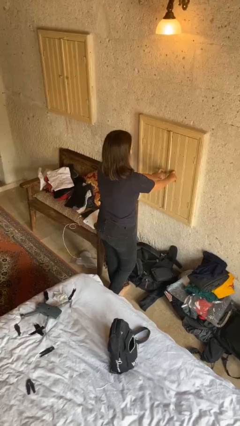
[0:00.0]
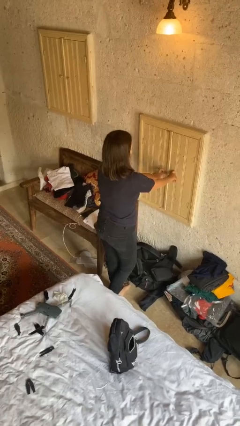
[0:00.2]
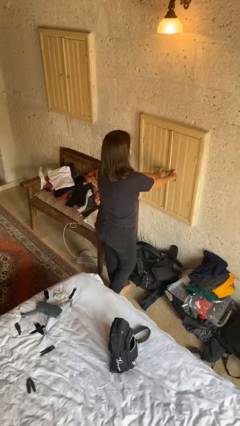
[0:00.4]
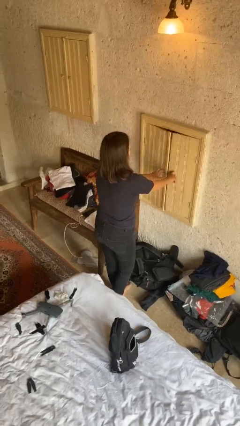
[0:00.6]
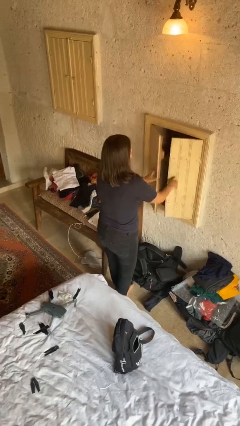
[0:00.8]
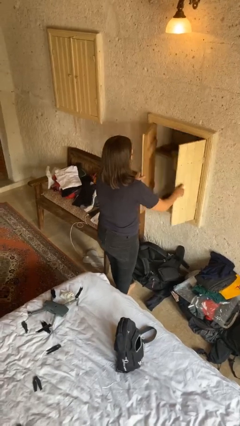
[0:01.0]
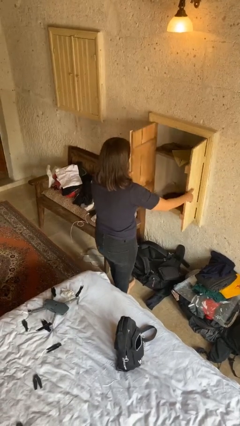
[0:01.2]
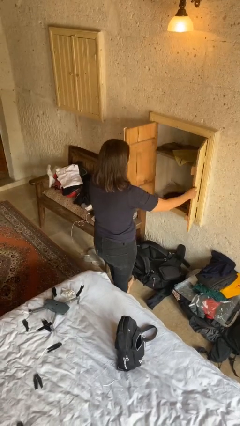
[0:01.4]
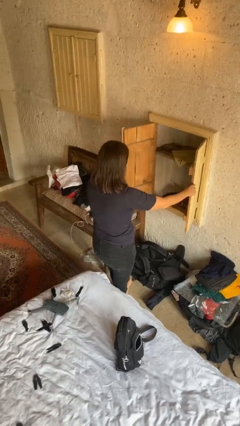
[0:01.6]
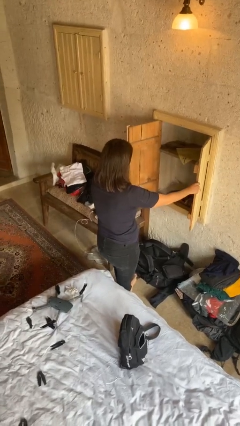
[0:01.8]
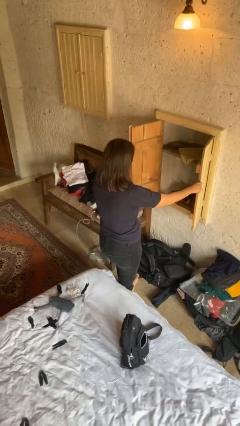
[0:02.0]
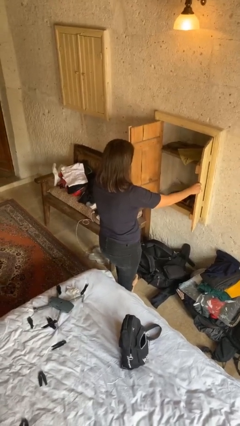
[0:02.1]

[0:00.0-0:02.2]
person opens closet door

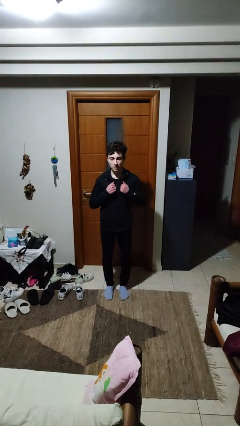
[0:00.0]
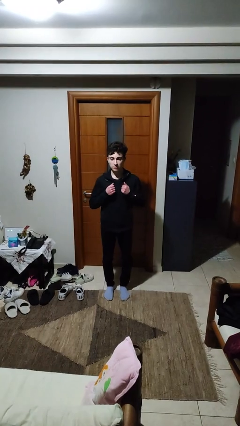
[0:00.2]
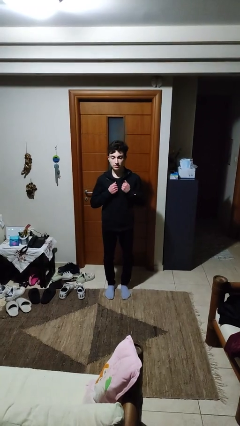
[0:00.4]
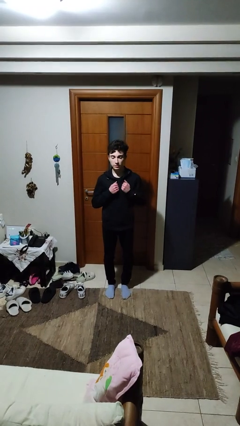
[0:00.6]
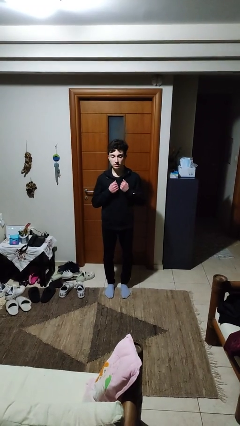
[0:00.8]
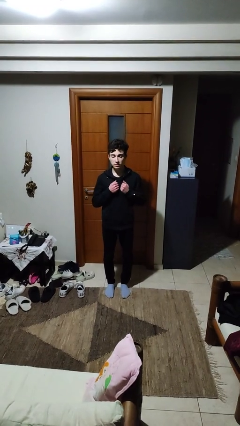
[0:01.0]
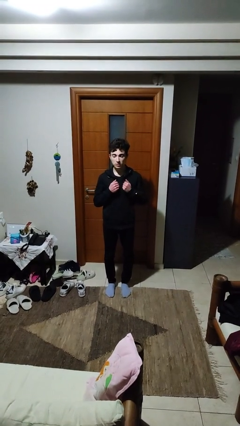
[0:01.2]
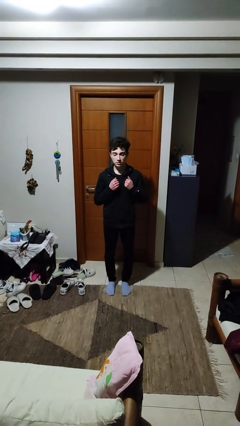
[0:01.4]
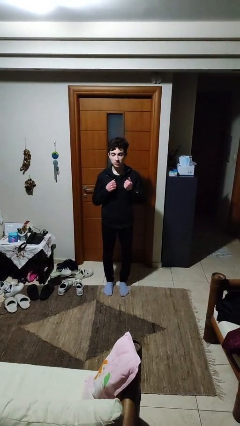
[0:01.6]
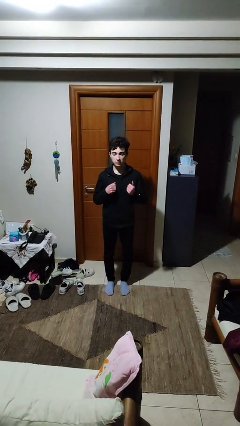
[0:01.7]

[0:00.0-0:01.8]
person drums on chest

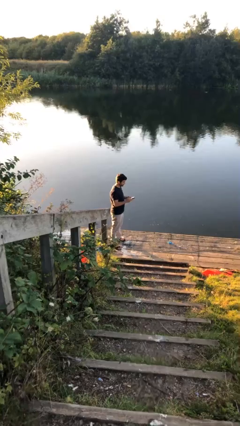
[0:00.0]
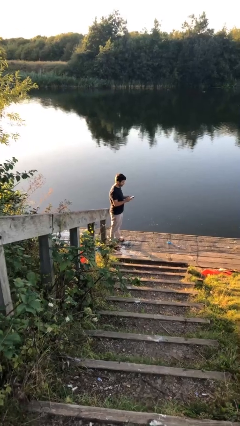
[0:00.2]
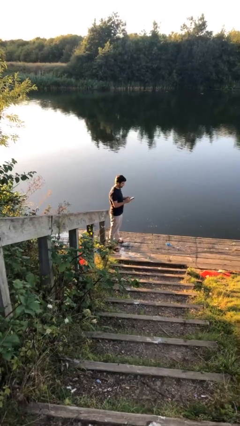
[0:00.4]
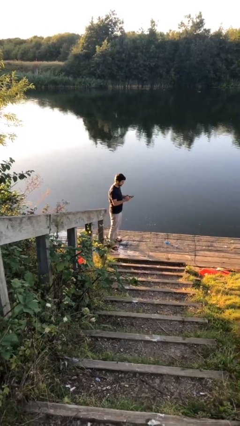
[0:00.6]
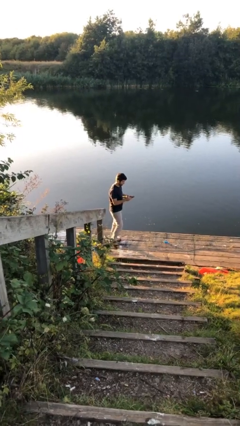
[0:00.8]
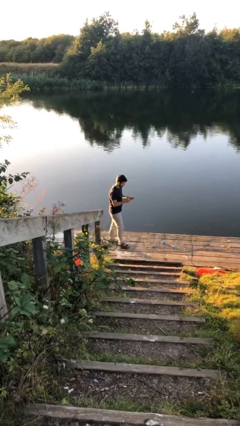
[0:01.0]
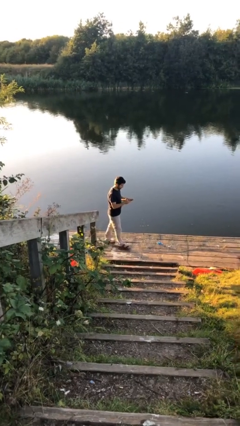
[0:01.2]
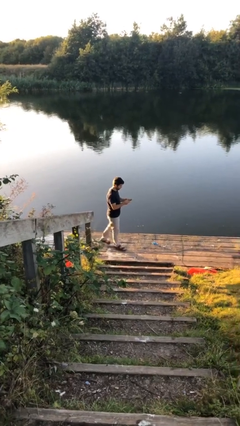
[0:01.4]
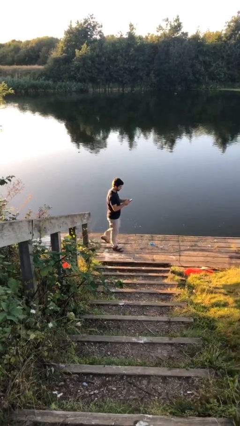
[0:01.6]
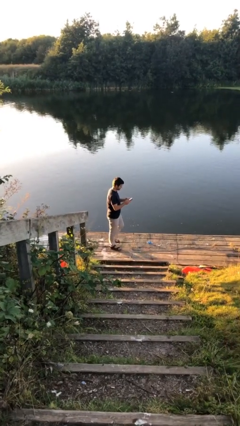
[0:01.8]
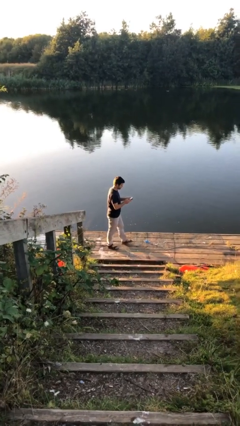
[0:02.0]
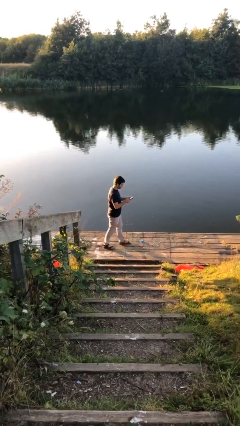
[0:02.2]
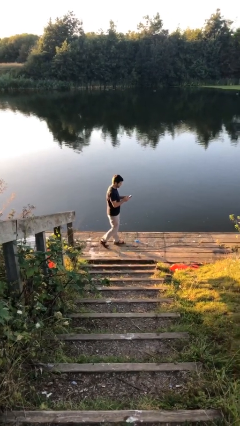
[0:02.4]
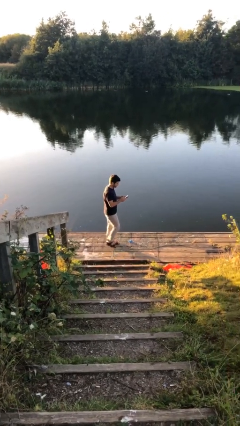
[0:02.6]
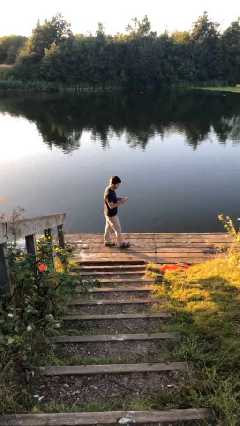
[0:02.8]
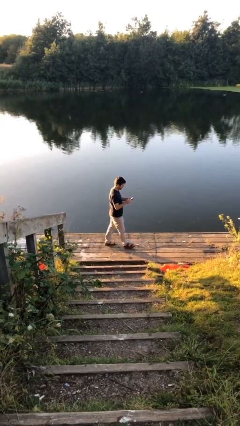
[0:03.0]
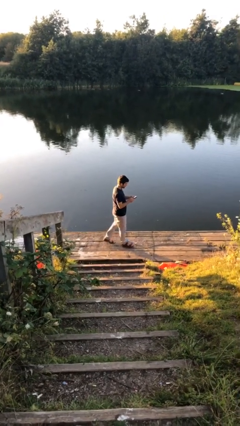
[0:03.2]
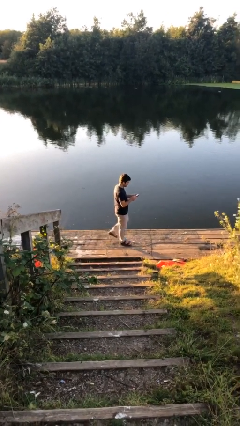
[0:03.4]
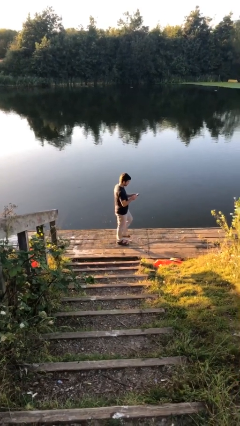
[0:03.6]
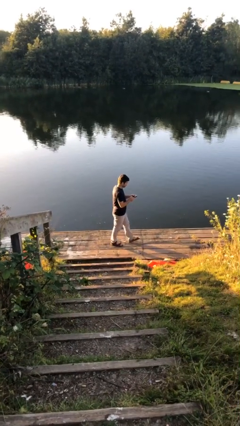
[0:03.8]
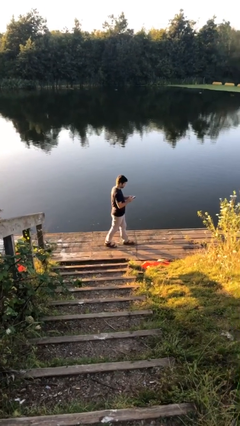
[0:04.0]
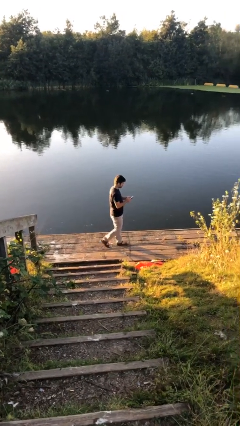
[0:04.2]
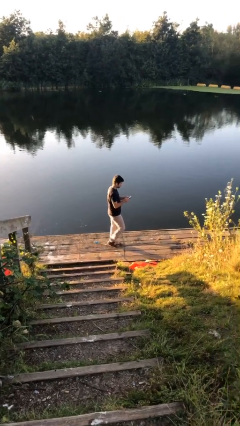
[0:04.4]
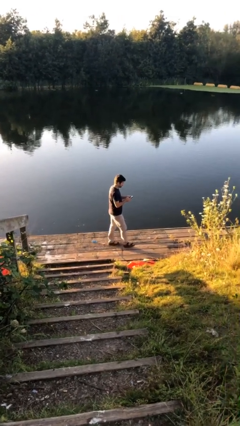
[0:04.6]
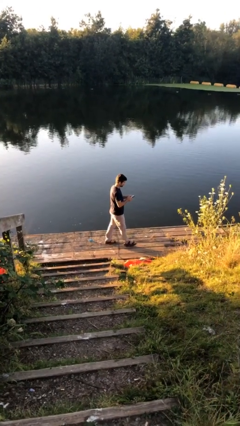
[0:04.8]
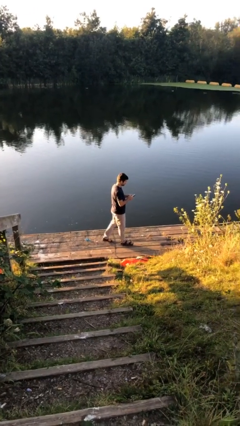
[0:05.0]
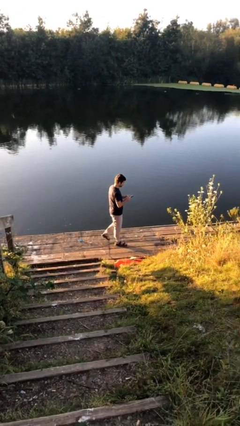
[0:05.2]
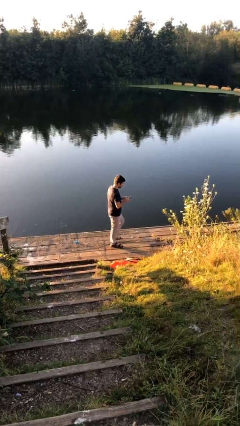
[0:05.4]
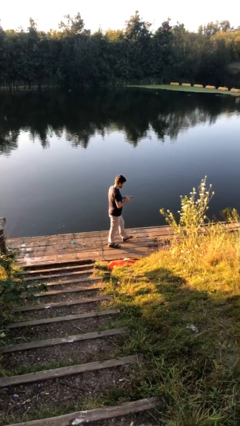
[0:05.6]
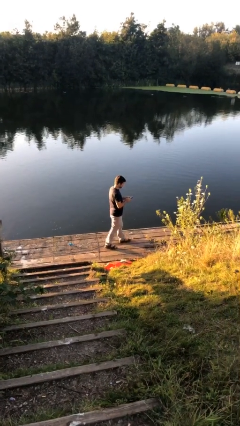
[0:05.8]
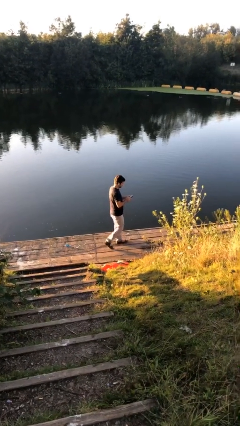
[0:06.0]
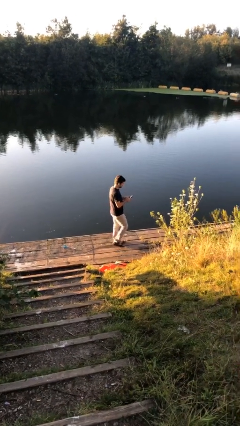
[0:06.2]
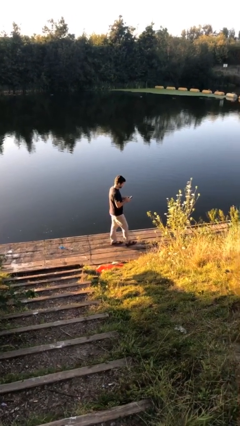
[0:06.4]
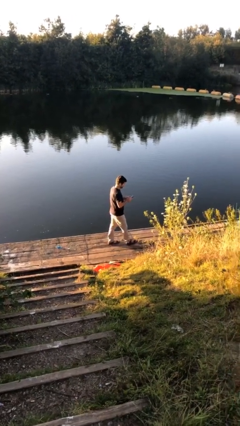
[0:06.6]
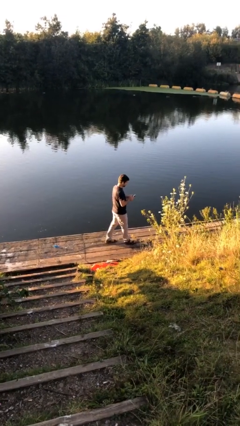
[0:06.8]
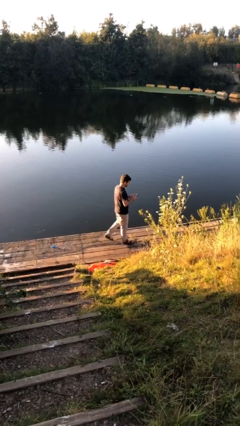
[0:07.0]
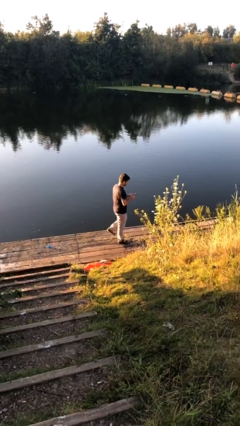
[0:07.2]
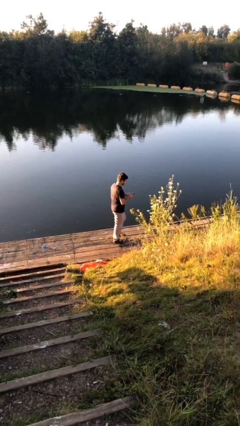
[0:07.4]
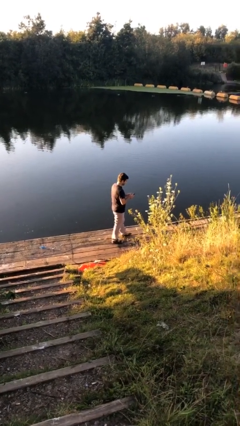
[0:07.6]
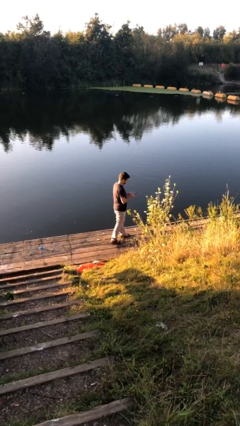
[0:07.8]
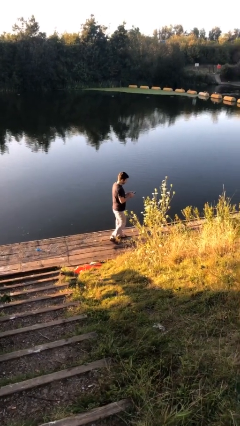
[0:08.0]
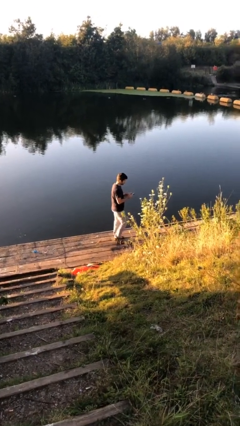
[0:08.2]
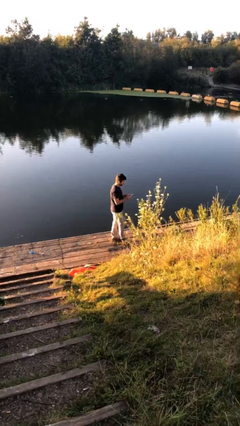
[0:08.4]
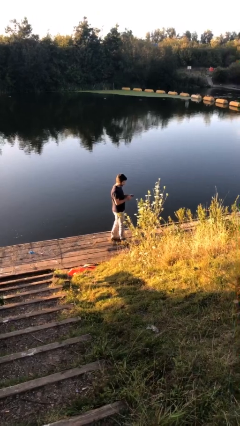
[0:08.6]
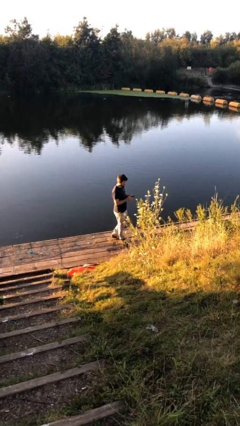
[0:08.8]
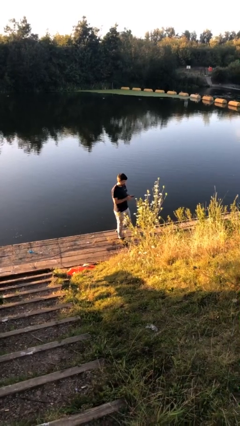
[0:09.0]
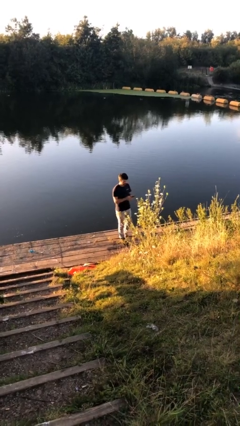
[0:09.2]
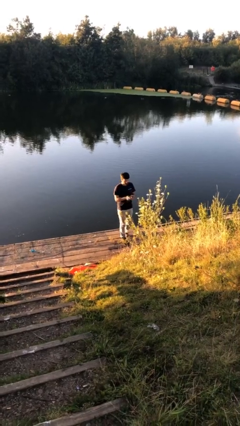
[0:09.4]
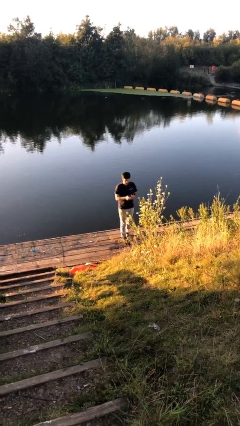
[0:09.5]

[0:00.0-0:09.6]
person texts on phone

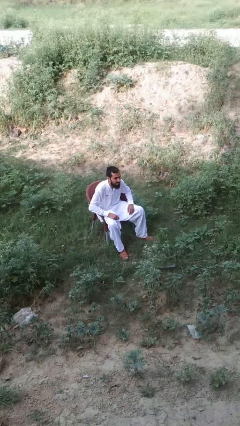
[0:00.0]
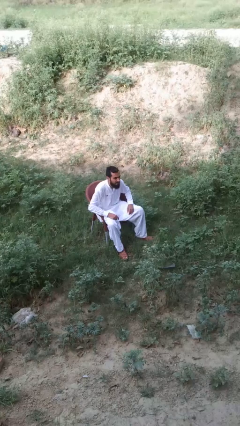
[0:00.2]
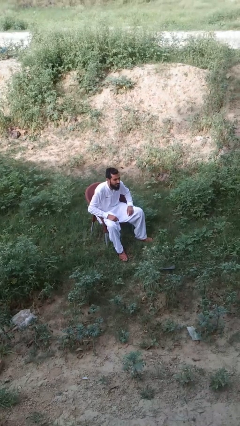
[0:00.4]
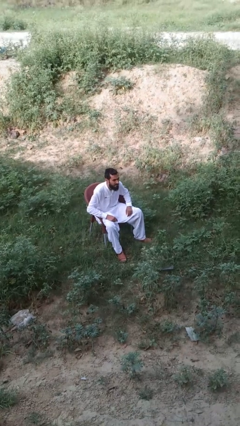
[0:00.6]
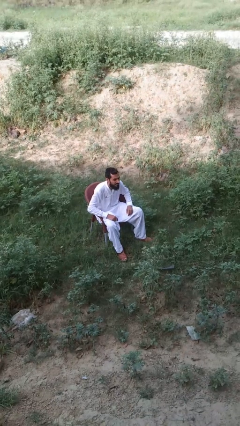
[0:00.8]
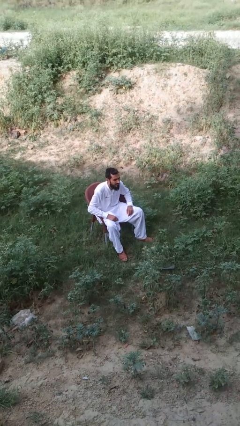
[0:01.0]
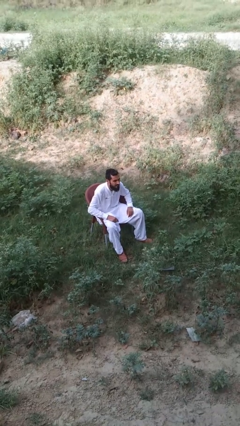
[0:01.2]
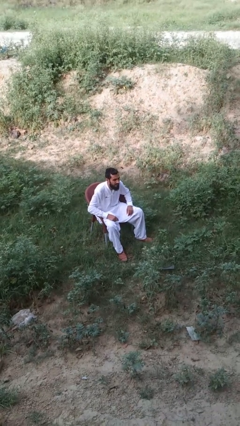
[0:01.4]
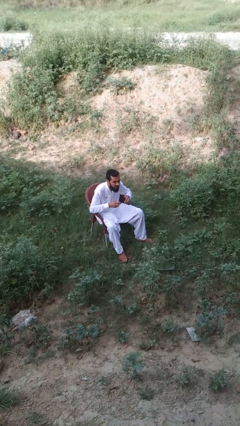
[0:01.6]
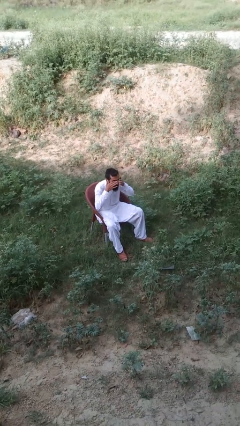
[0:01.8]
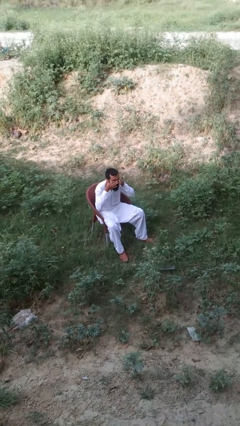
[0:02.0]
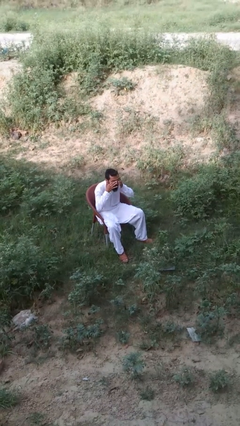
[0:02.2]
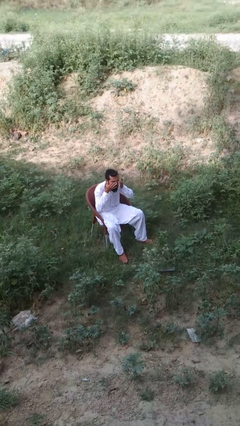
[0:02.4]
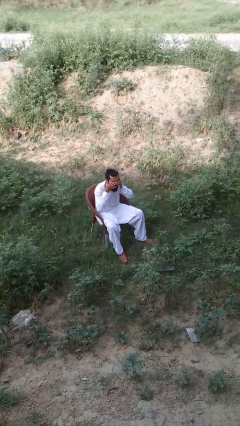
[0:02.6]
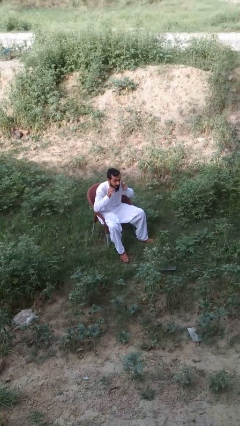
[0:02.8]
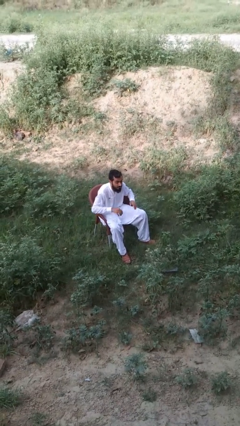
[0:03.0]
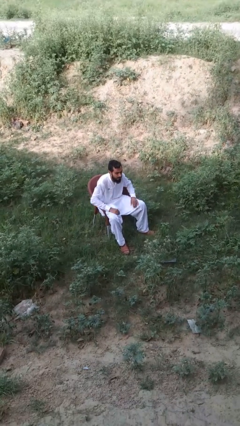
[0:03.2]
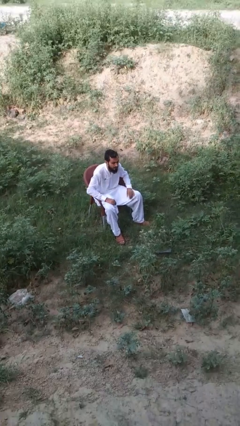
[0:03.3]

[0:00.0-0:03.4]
person rubs eyes

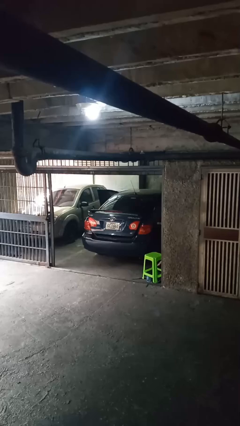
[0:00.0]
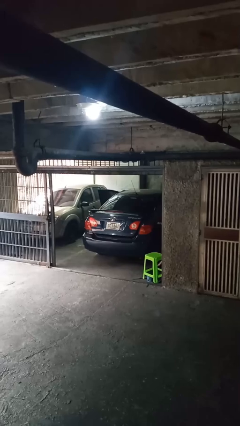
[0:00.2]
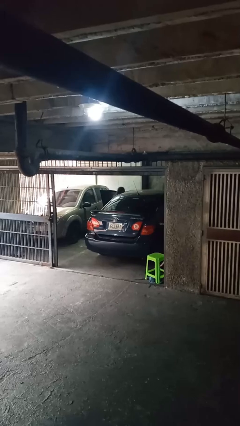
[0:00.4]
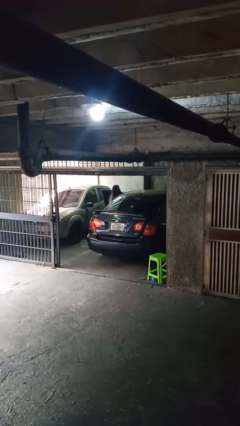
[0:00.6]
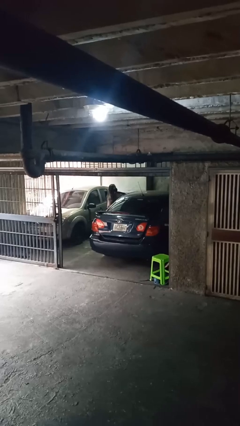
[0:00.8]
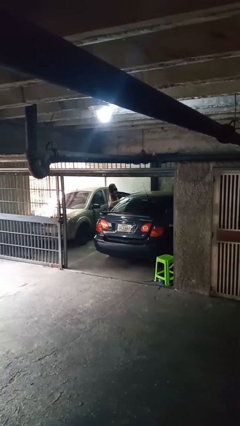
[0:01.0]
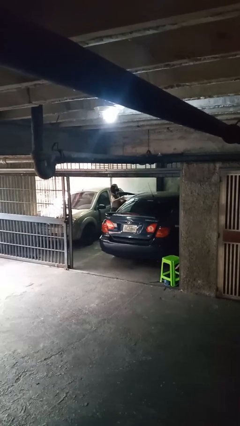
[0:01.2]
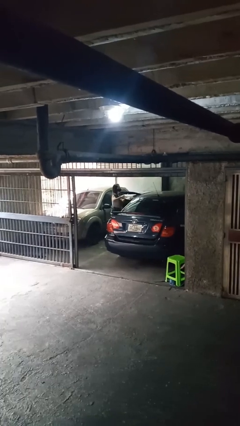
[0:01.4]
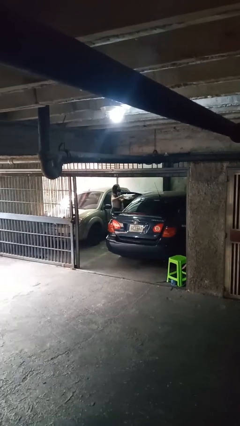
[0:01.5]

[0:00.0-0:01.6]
person unloads car
